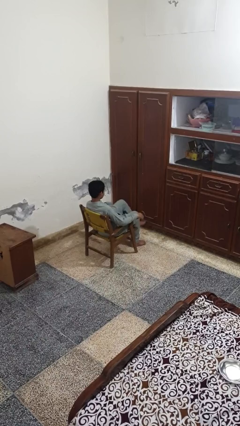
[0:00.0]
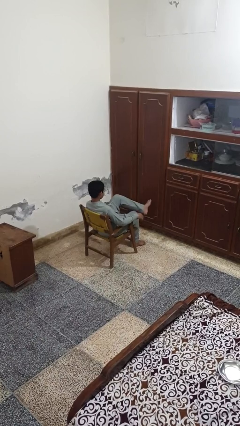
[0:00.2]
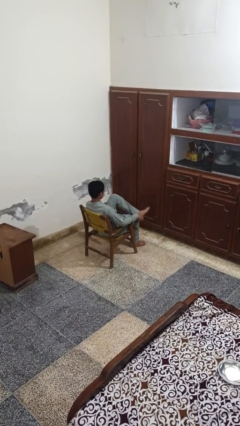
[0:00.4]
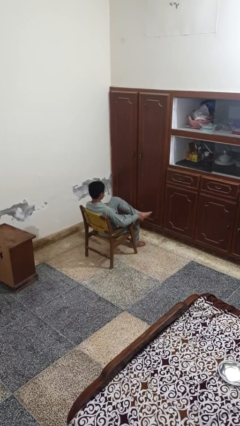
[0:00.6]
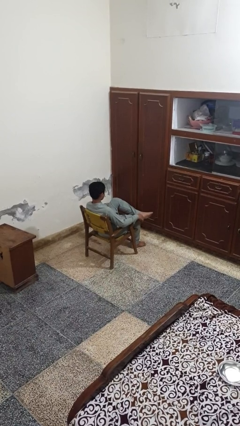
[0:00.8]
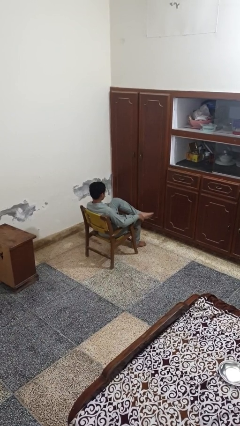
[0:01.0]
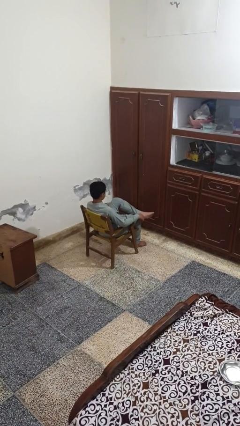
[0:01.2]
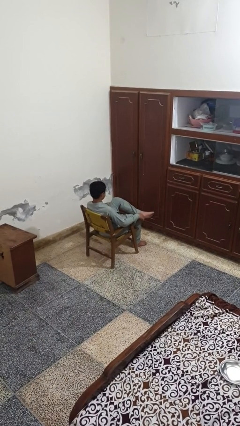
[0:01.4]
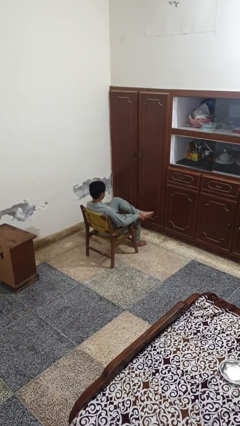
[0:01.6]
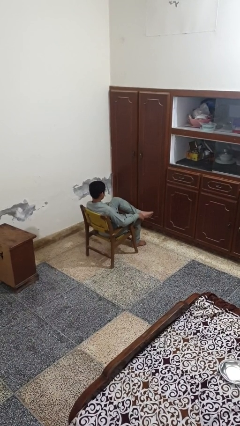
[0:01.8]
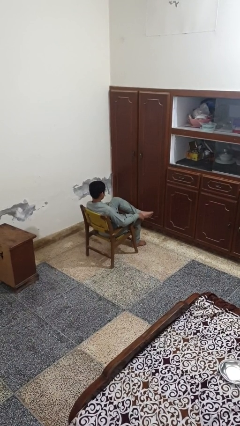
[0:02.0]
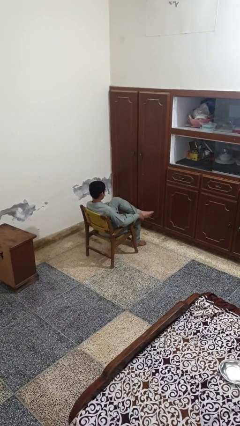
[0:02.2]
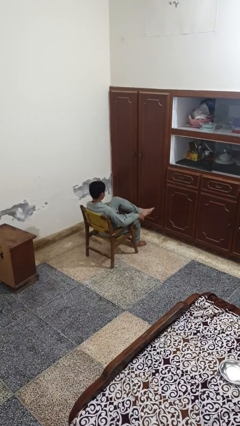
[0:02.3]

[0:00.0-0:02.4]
person crosses legs

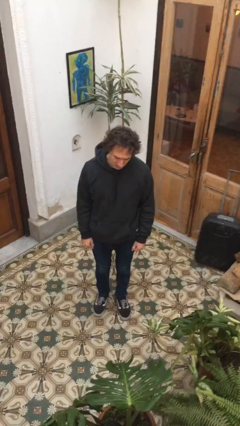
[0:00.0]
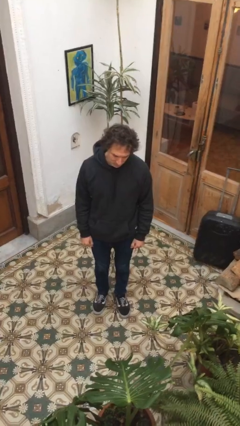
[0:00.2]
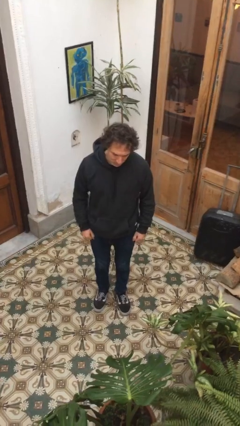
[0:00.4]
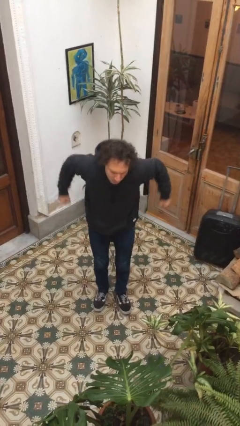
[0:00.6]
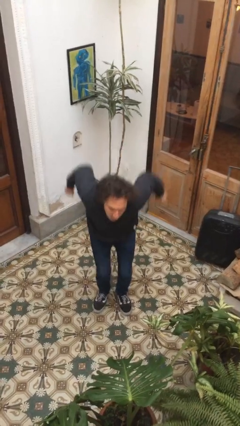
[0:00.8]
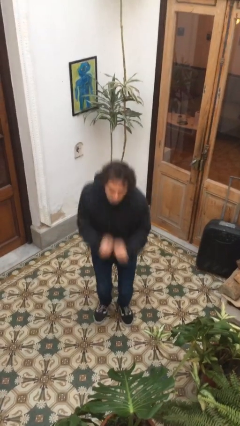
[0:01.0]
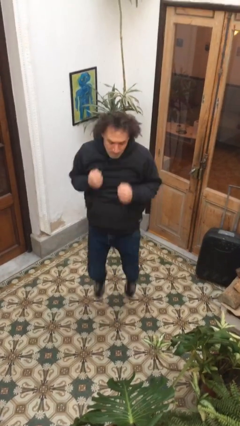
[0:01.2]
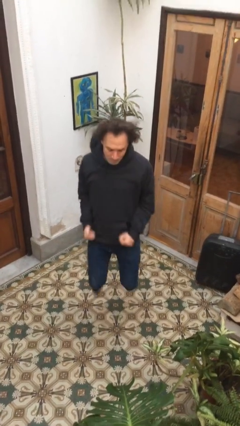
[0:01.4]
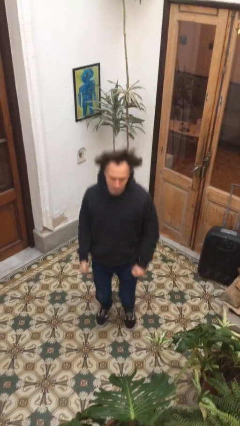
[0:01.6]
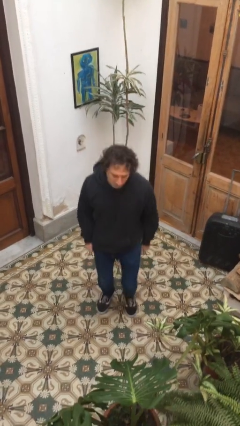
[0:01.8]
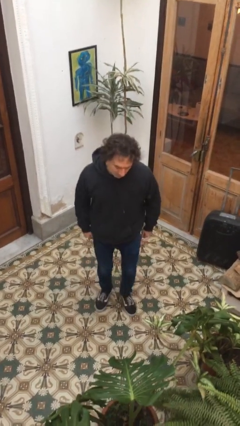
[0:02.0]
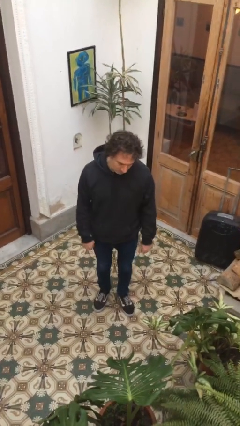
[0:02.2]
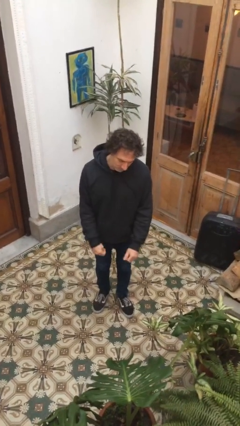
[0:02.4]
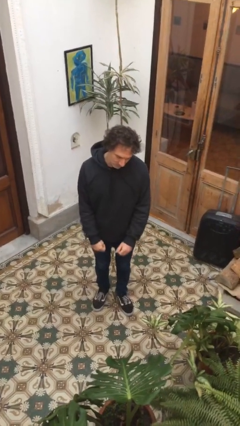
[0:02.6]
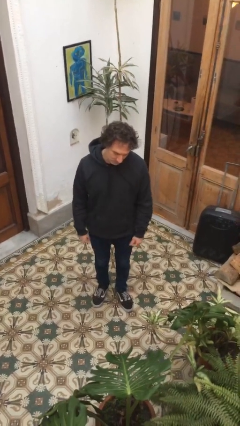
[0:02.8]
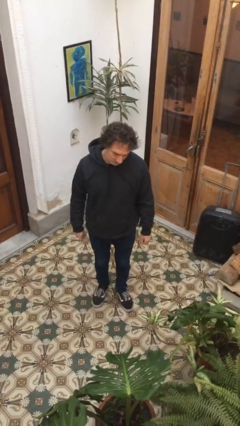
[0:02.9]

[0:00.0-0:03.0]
person jumps

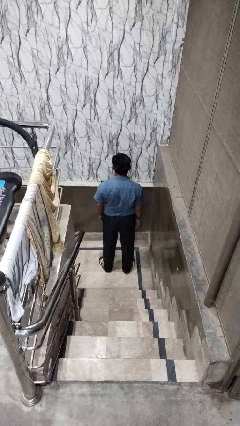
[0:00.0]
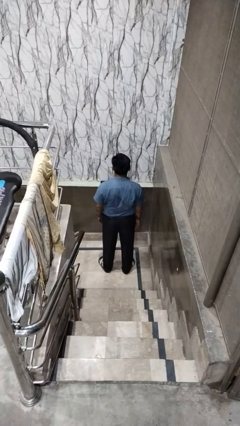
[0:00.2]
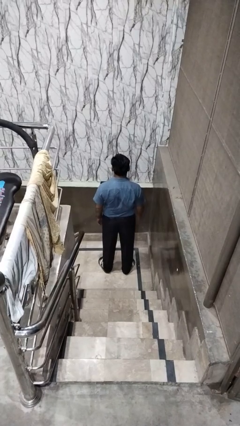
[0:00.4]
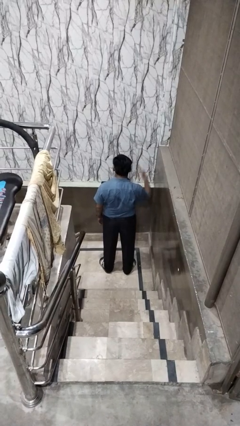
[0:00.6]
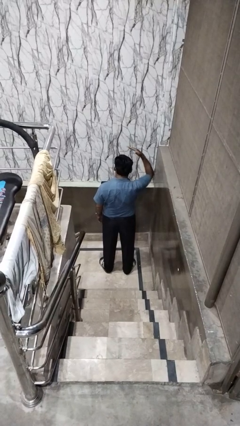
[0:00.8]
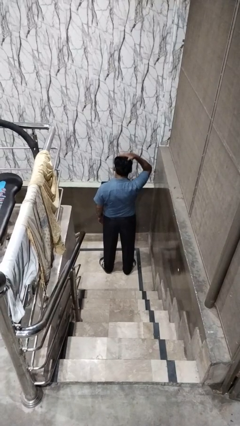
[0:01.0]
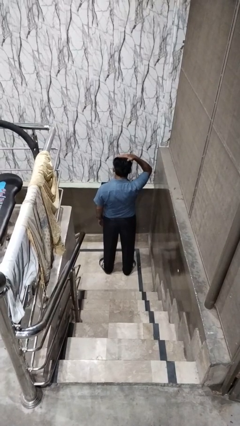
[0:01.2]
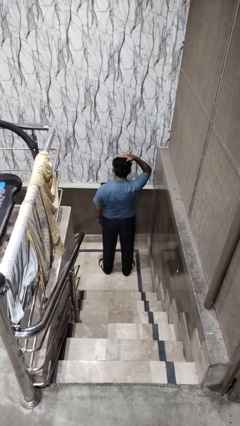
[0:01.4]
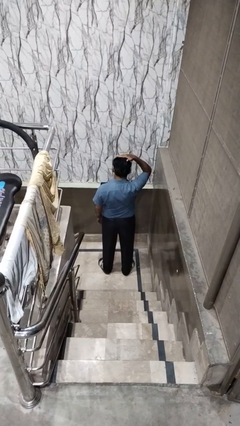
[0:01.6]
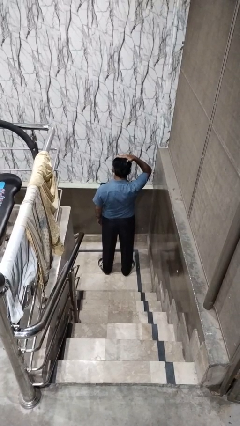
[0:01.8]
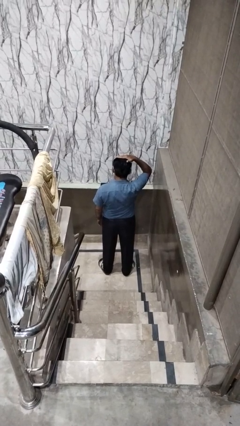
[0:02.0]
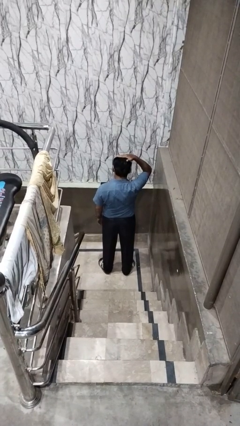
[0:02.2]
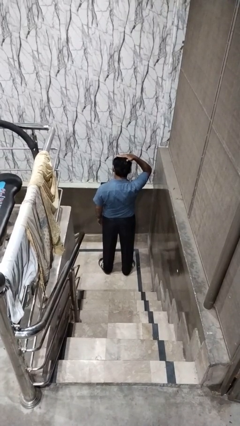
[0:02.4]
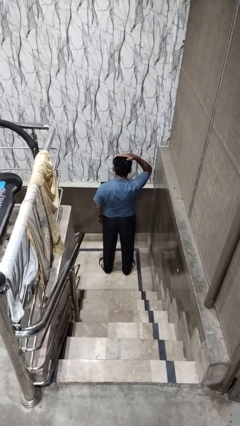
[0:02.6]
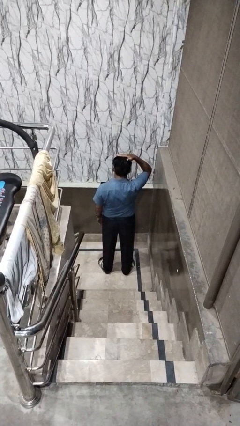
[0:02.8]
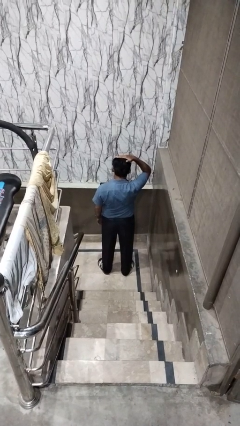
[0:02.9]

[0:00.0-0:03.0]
person pats head

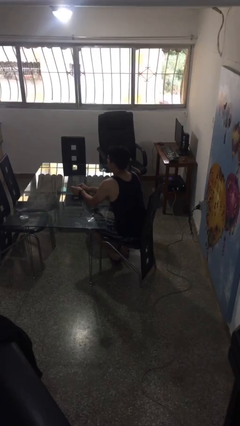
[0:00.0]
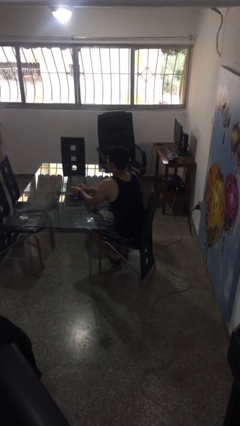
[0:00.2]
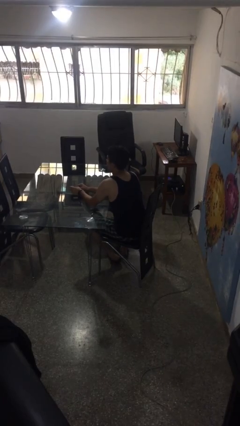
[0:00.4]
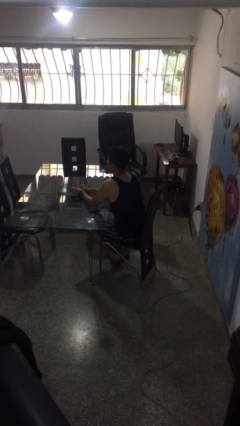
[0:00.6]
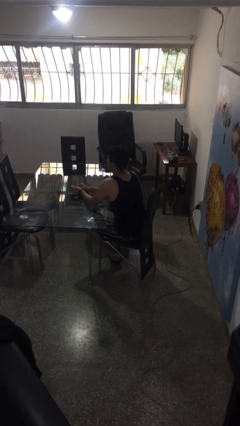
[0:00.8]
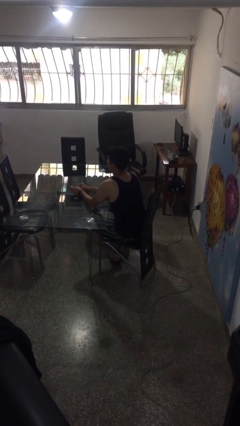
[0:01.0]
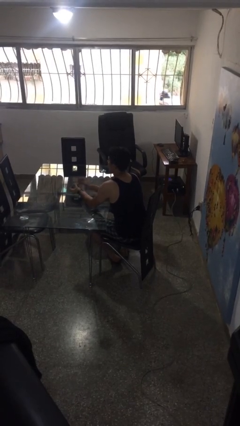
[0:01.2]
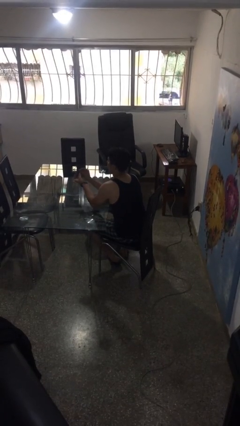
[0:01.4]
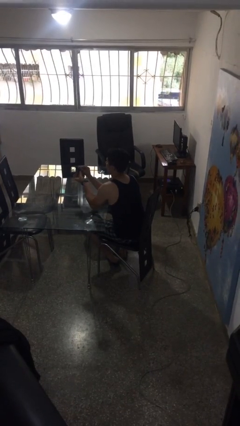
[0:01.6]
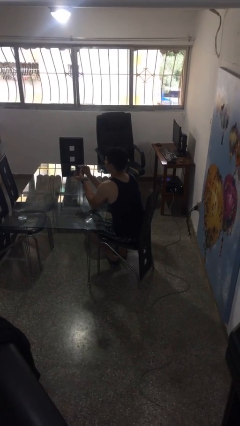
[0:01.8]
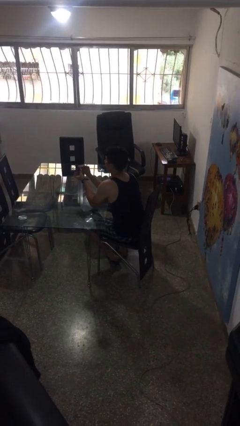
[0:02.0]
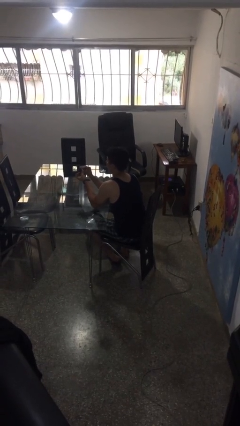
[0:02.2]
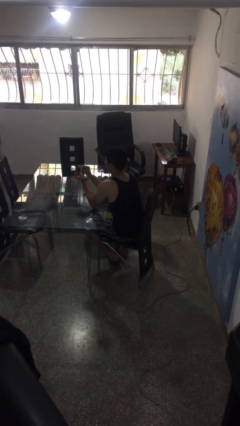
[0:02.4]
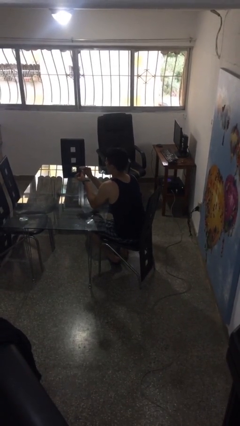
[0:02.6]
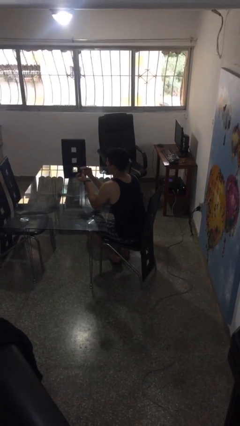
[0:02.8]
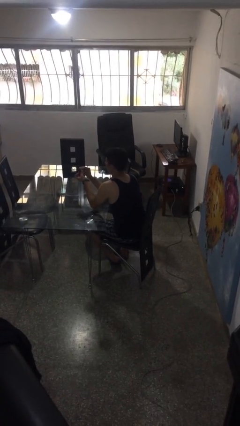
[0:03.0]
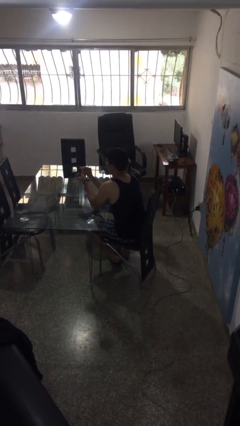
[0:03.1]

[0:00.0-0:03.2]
person files fingernails

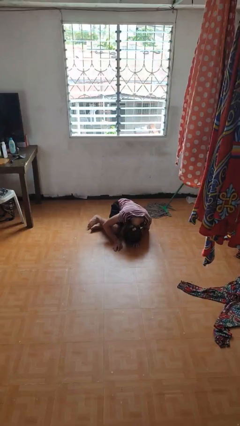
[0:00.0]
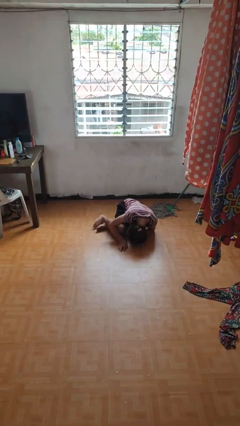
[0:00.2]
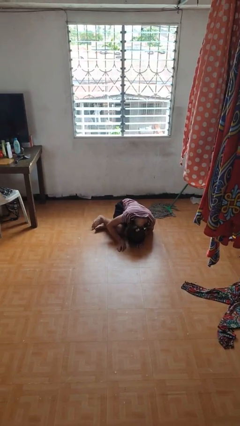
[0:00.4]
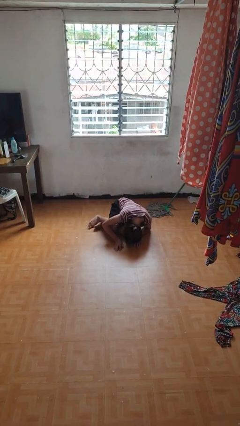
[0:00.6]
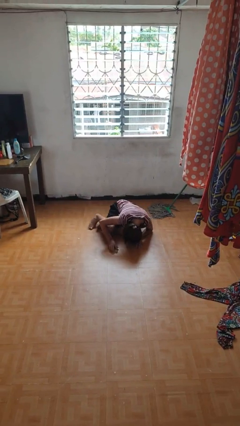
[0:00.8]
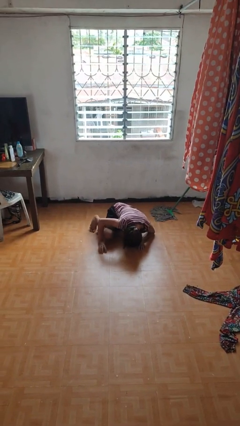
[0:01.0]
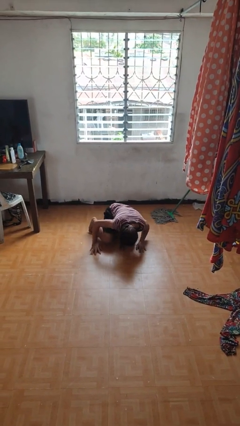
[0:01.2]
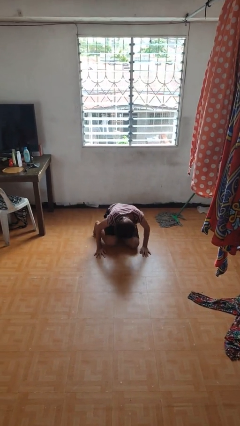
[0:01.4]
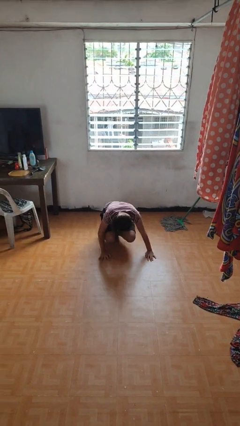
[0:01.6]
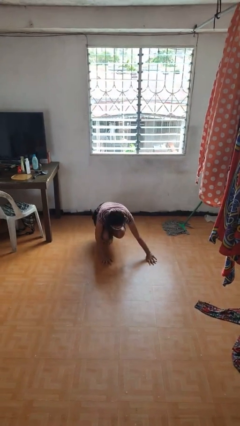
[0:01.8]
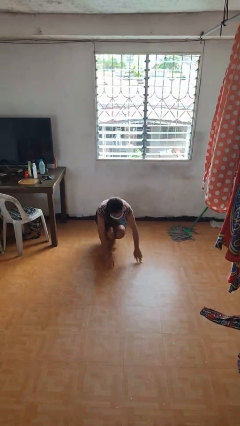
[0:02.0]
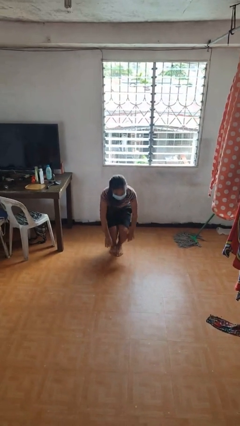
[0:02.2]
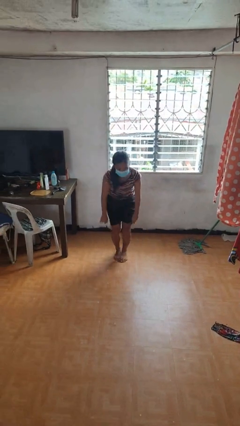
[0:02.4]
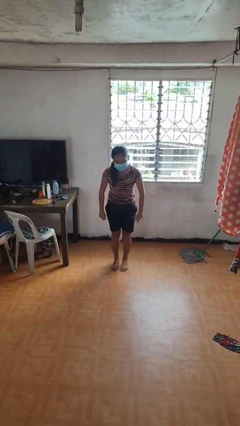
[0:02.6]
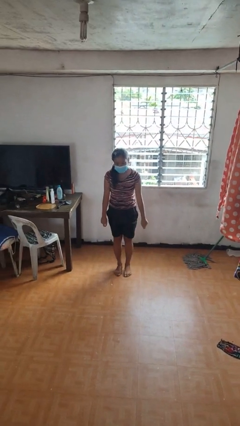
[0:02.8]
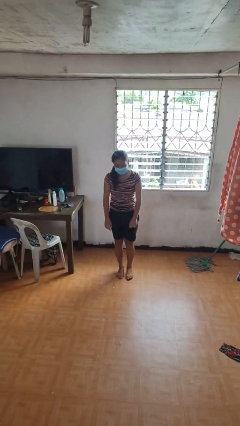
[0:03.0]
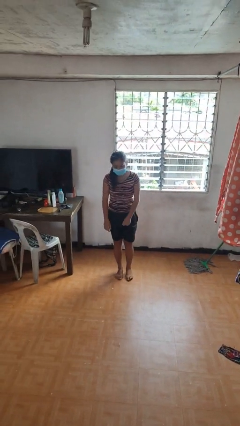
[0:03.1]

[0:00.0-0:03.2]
person stands up from floor

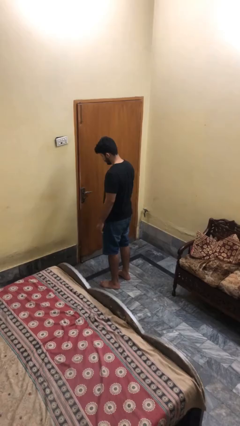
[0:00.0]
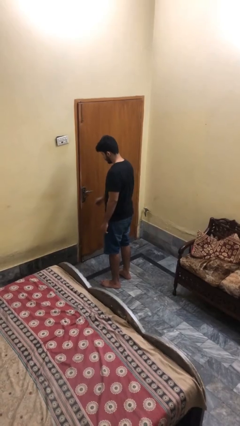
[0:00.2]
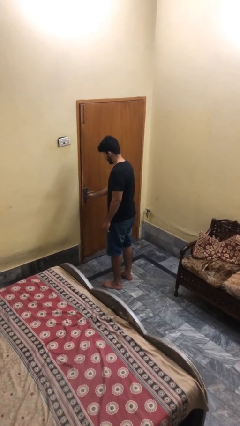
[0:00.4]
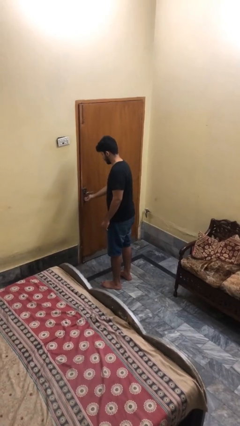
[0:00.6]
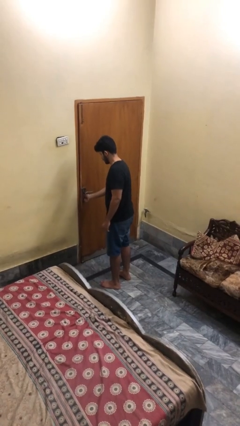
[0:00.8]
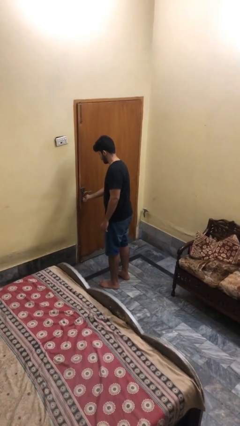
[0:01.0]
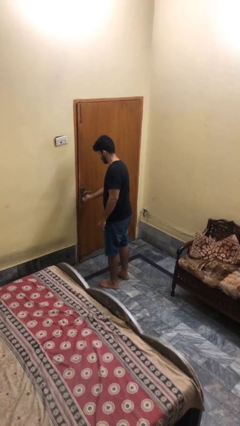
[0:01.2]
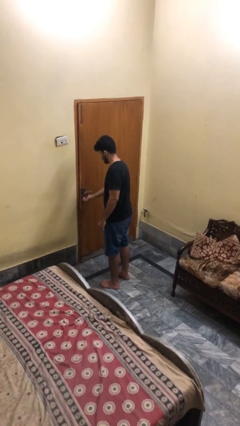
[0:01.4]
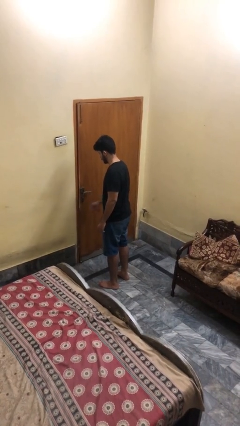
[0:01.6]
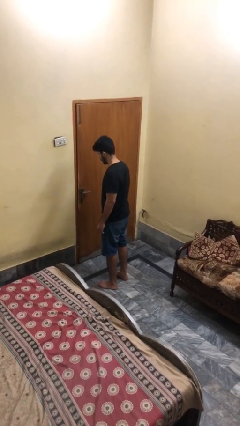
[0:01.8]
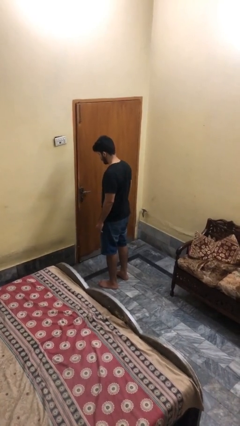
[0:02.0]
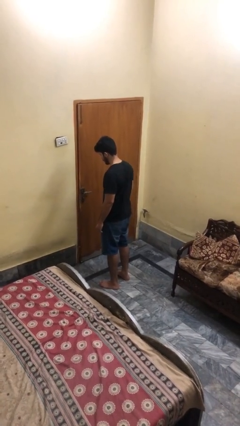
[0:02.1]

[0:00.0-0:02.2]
person unlocks door with keys
